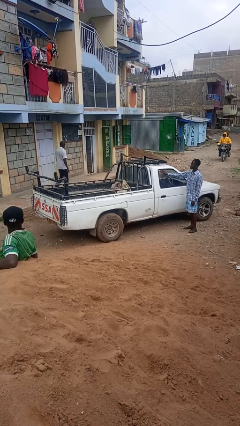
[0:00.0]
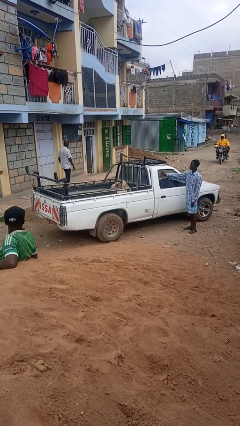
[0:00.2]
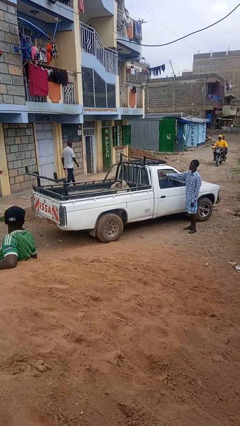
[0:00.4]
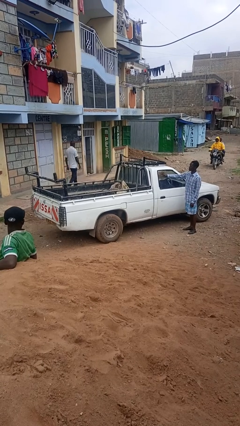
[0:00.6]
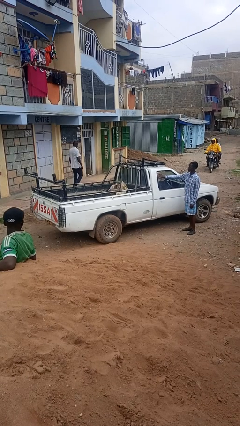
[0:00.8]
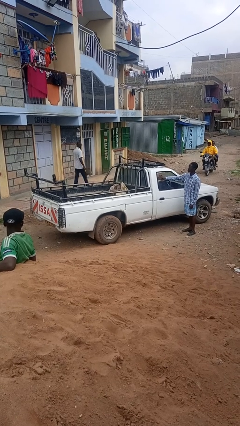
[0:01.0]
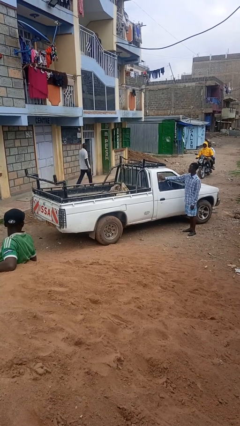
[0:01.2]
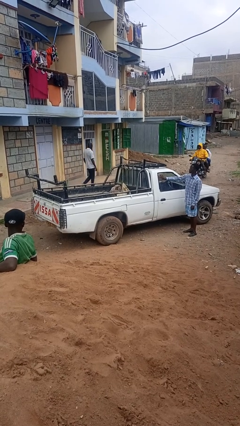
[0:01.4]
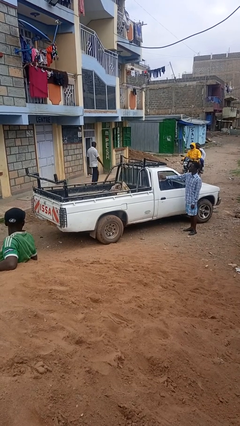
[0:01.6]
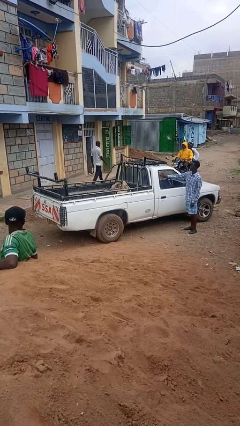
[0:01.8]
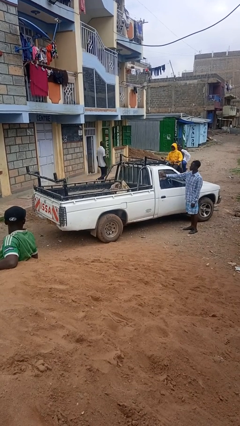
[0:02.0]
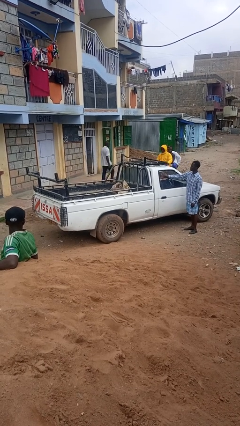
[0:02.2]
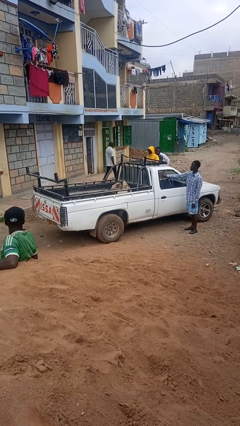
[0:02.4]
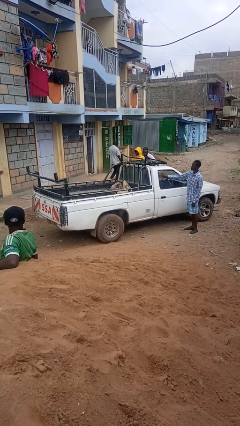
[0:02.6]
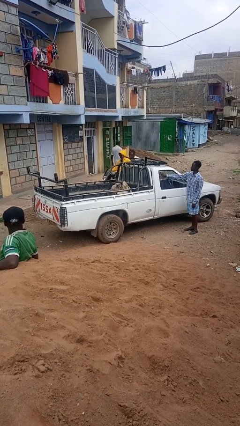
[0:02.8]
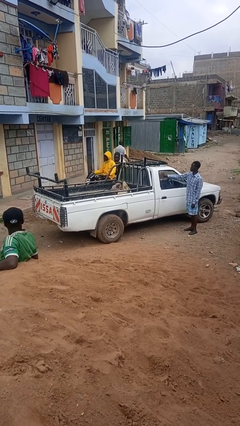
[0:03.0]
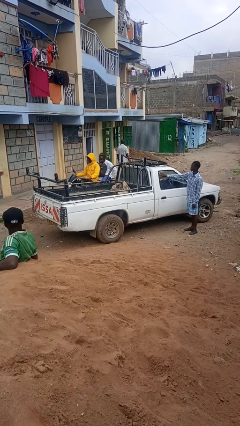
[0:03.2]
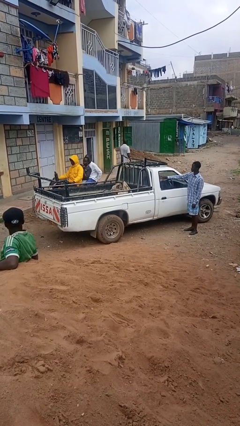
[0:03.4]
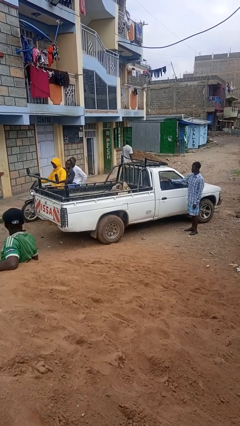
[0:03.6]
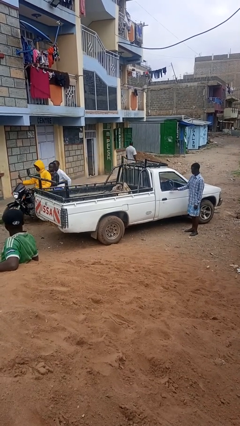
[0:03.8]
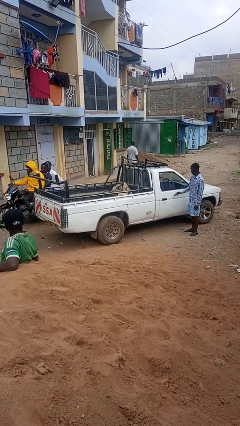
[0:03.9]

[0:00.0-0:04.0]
person polishes car with rag

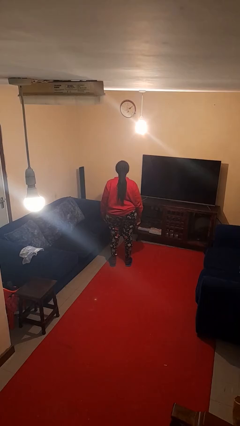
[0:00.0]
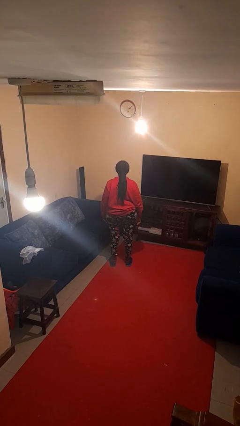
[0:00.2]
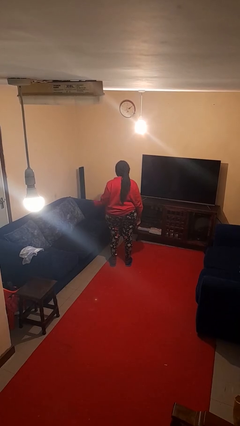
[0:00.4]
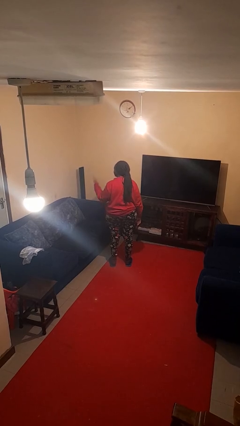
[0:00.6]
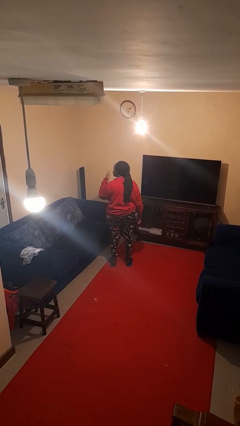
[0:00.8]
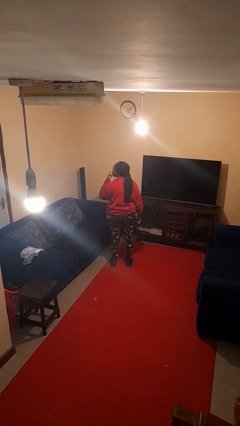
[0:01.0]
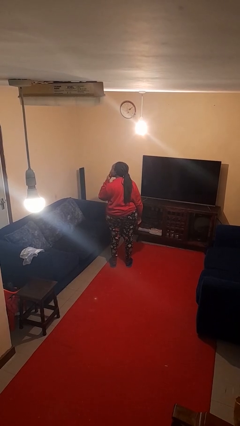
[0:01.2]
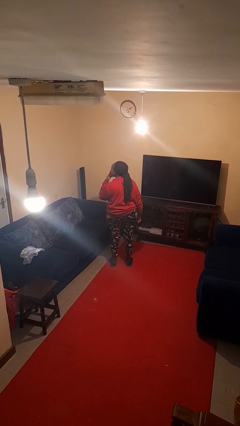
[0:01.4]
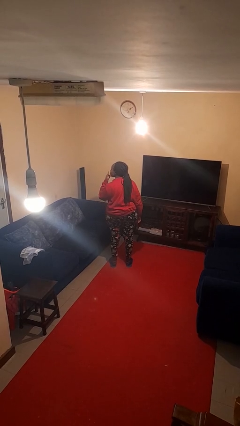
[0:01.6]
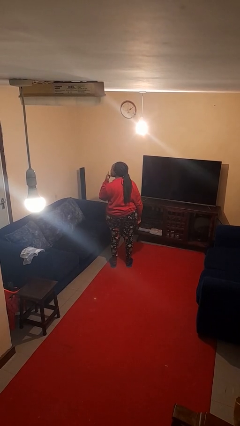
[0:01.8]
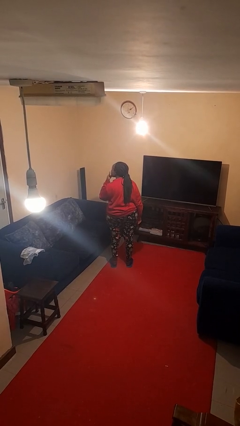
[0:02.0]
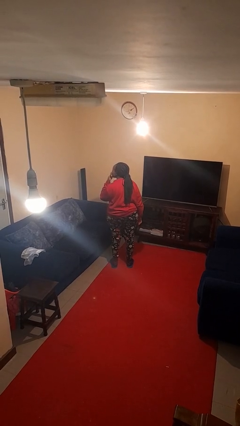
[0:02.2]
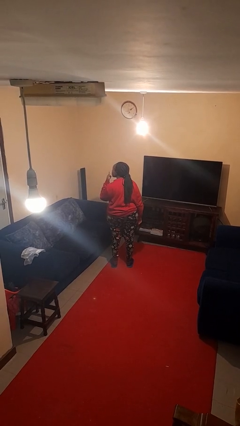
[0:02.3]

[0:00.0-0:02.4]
person gestures be quiet

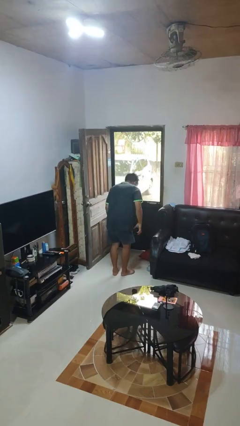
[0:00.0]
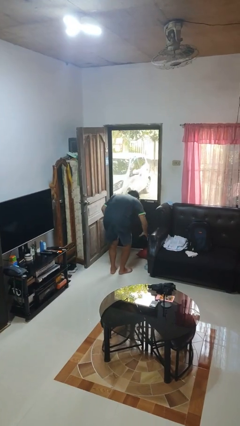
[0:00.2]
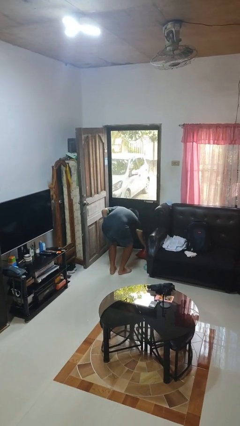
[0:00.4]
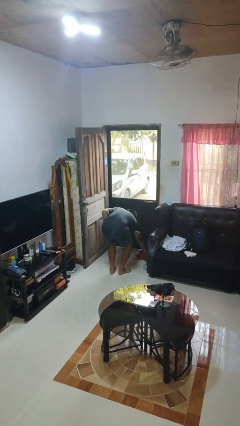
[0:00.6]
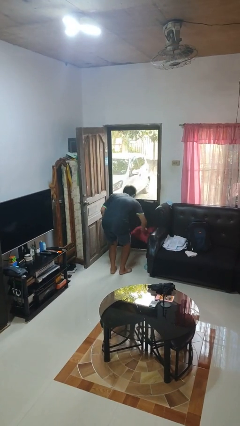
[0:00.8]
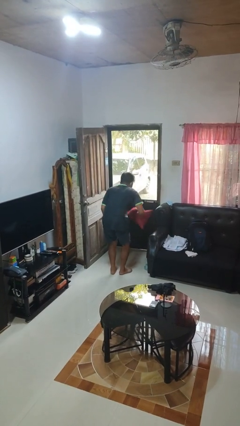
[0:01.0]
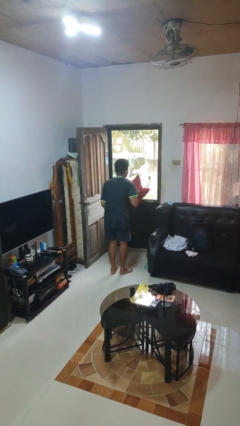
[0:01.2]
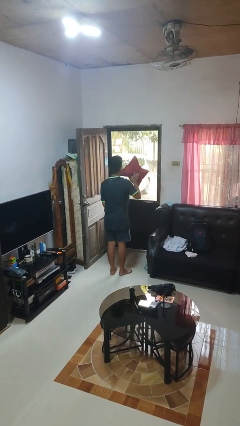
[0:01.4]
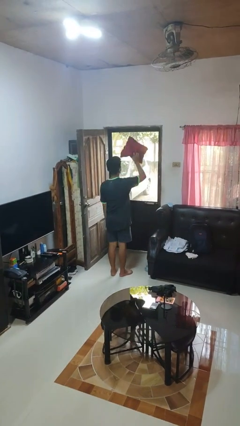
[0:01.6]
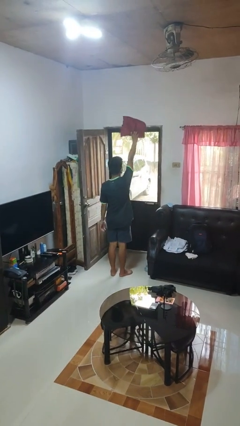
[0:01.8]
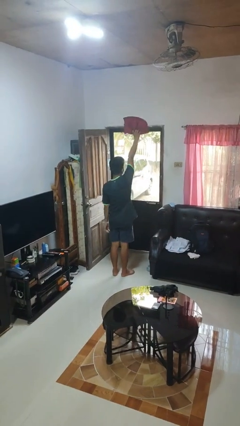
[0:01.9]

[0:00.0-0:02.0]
person picks up object from floor

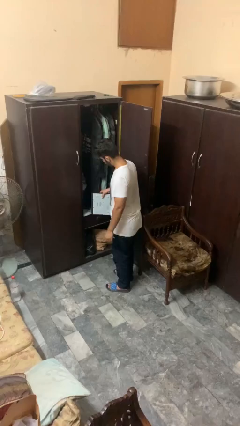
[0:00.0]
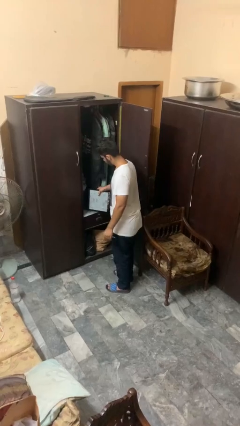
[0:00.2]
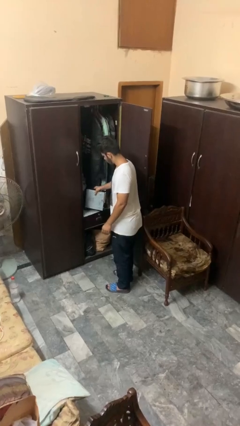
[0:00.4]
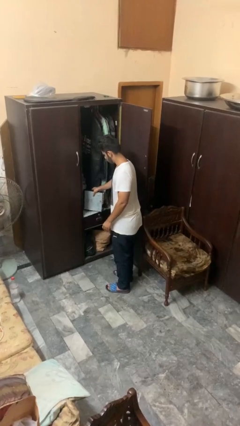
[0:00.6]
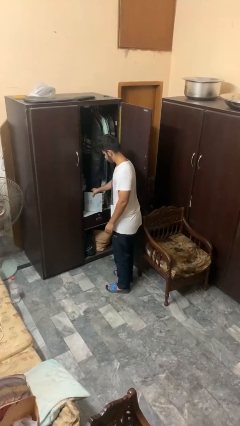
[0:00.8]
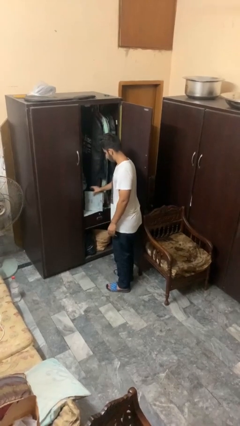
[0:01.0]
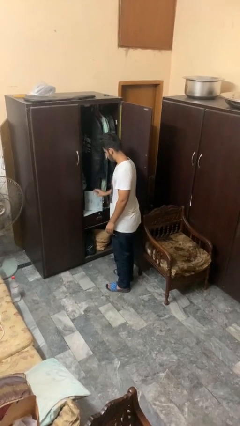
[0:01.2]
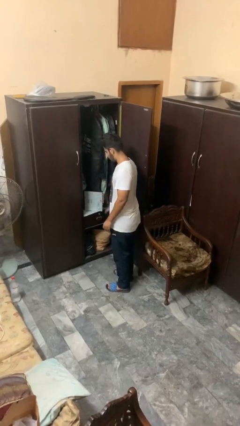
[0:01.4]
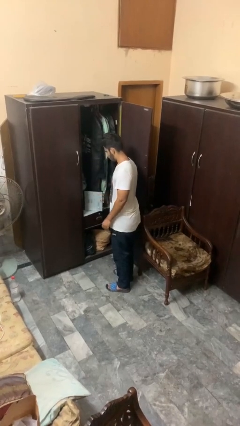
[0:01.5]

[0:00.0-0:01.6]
person puts down object into cabinet

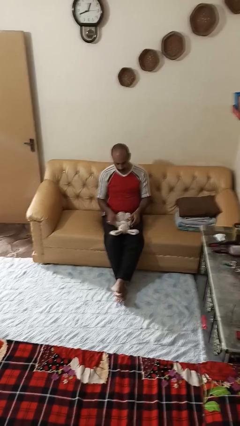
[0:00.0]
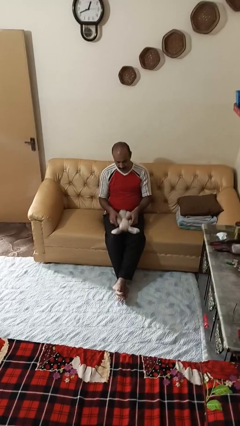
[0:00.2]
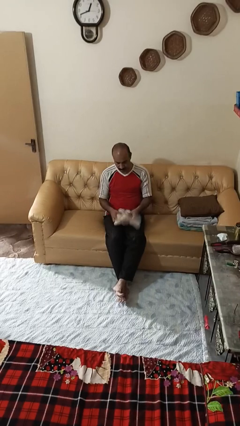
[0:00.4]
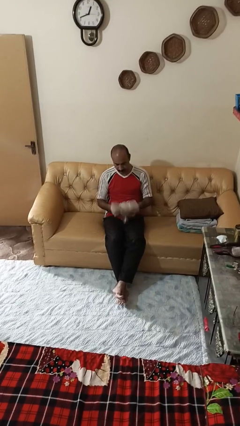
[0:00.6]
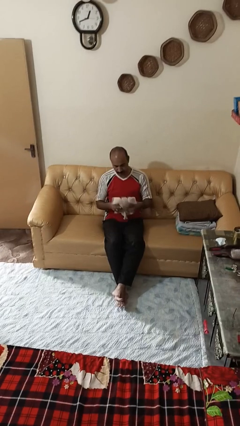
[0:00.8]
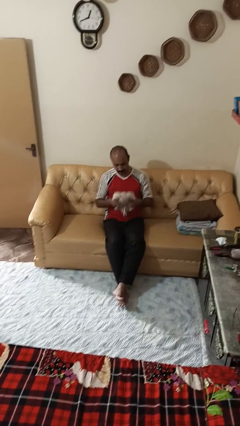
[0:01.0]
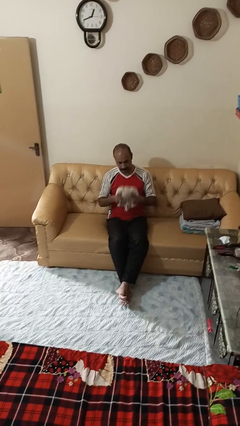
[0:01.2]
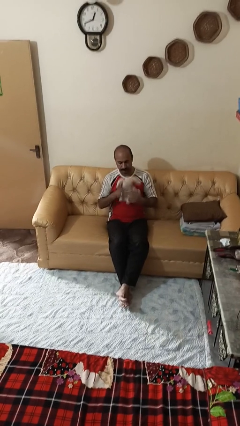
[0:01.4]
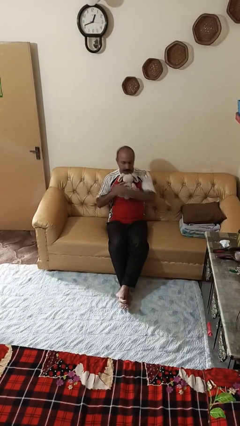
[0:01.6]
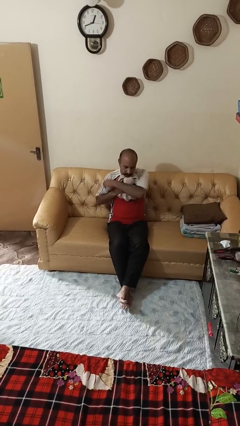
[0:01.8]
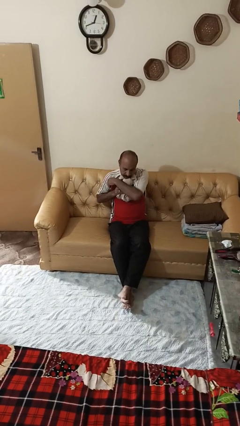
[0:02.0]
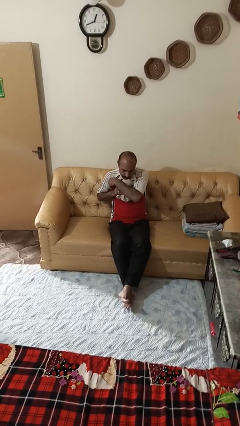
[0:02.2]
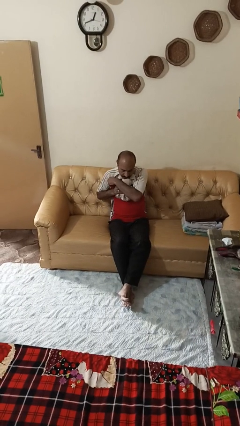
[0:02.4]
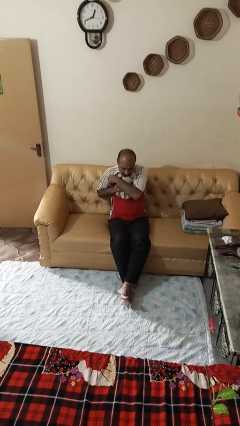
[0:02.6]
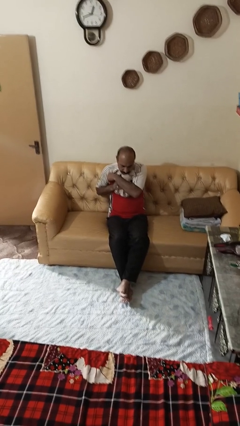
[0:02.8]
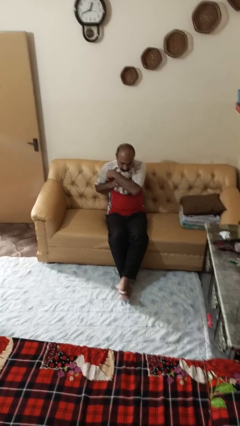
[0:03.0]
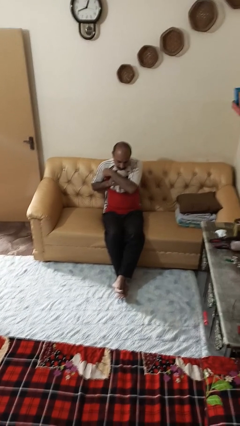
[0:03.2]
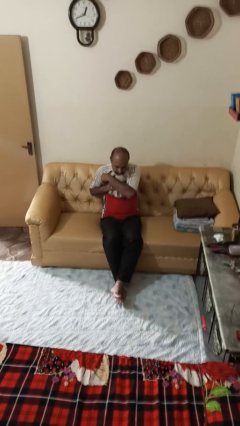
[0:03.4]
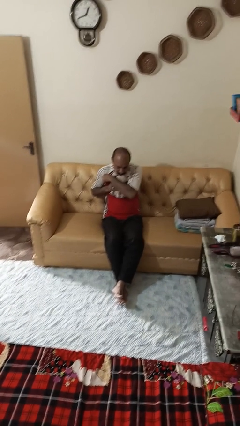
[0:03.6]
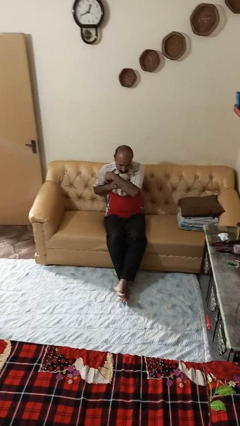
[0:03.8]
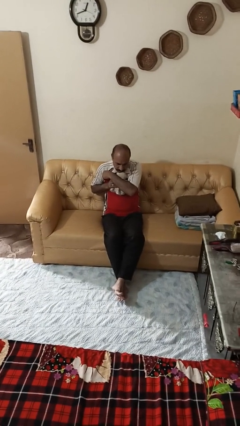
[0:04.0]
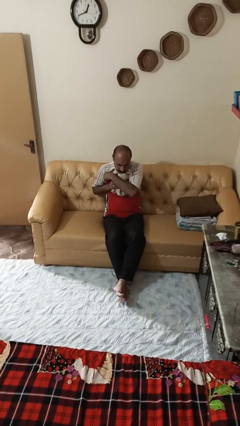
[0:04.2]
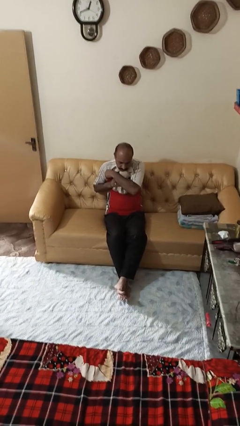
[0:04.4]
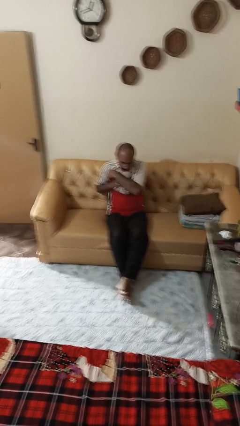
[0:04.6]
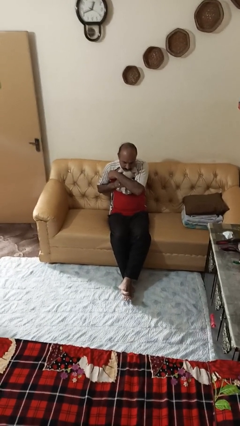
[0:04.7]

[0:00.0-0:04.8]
person hugs stuffed animal

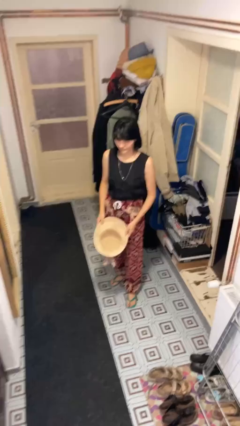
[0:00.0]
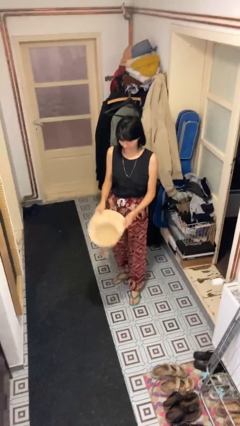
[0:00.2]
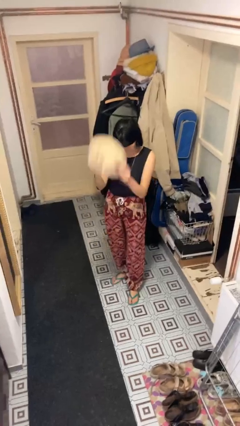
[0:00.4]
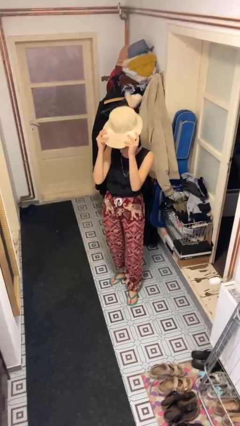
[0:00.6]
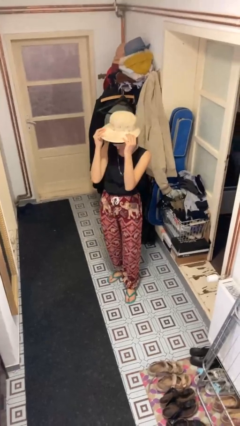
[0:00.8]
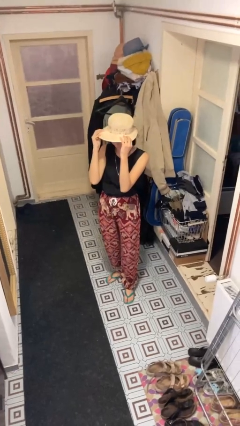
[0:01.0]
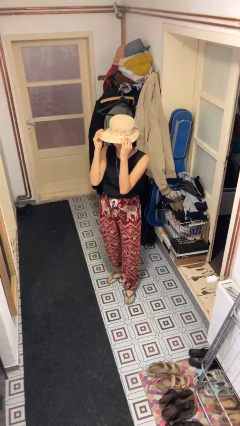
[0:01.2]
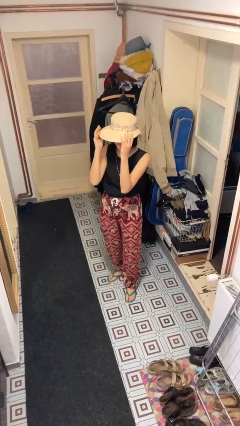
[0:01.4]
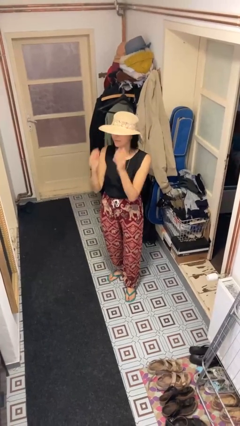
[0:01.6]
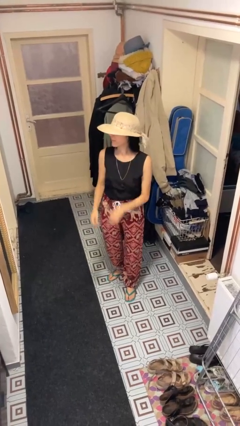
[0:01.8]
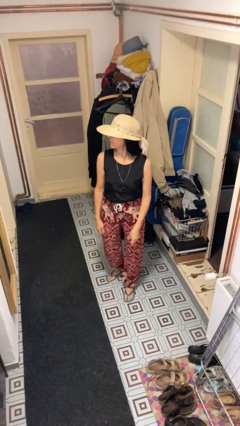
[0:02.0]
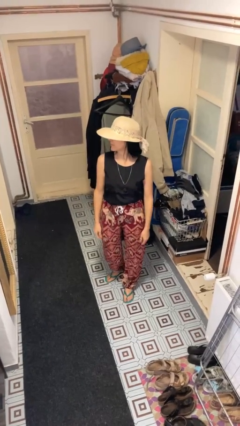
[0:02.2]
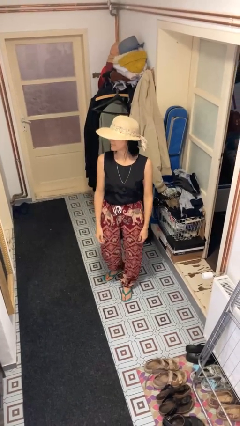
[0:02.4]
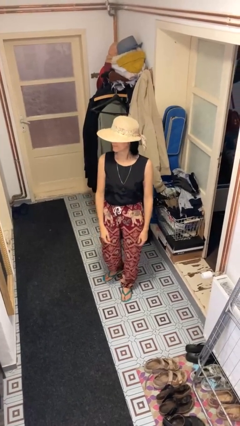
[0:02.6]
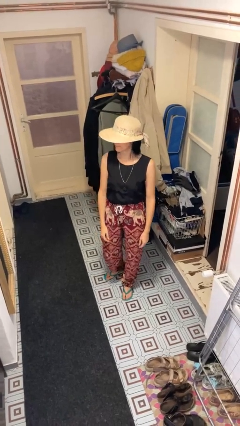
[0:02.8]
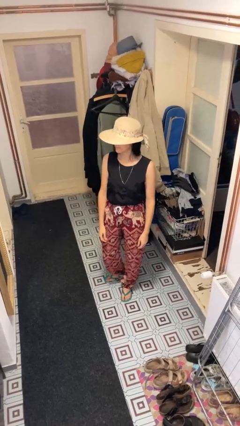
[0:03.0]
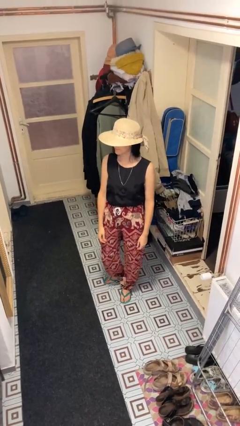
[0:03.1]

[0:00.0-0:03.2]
person puts on hat
